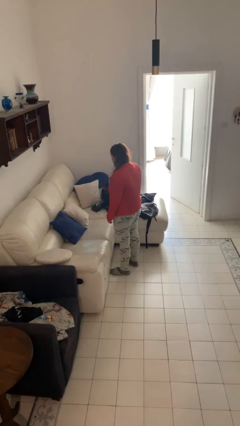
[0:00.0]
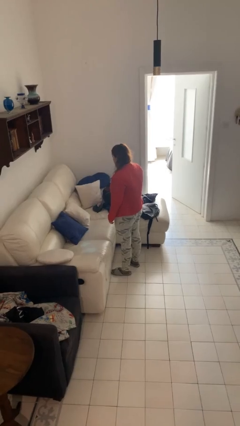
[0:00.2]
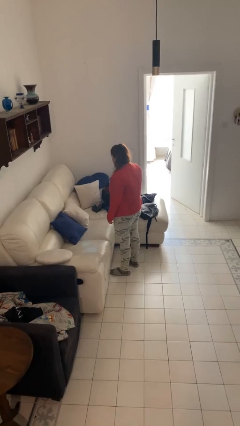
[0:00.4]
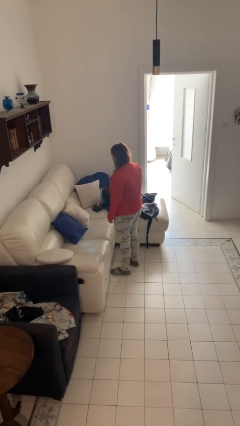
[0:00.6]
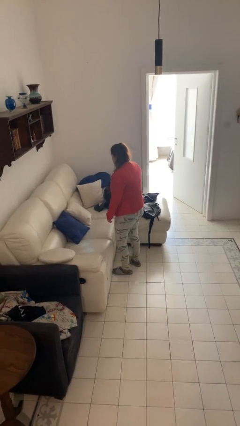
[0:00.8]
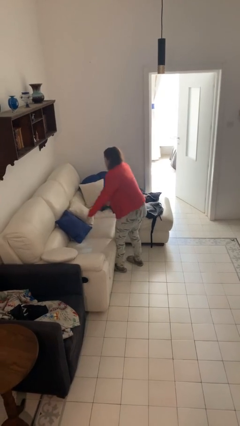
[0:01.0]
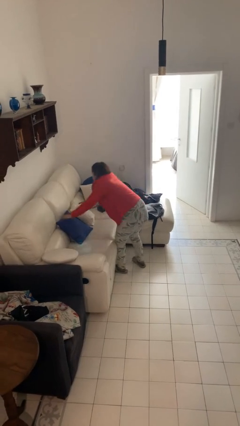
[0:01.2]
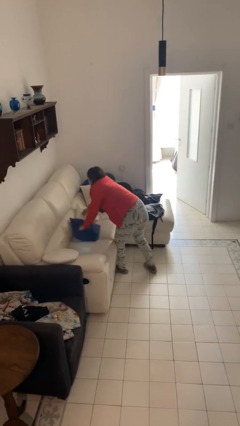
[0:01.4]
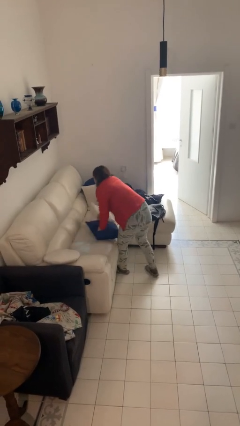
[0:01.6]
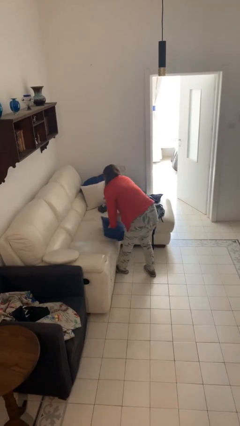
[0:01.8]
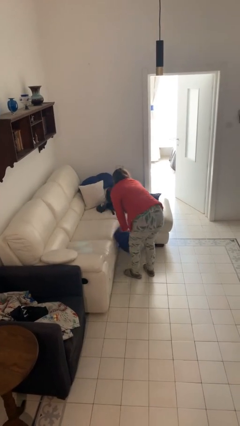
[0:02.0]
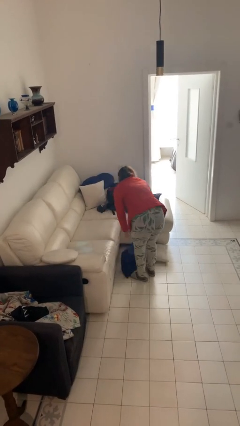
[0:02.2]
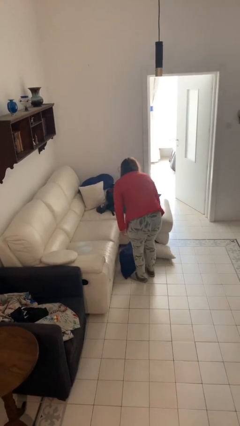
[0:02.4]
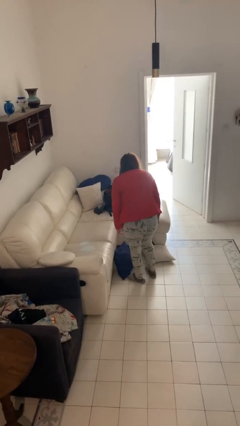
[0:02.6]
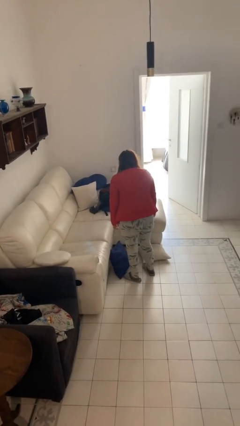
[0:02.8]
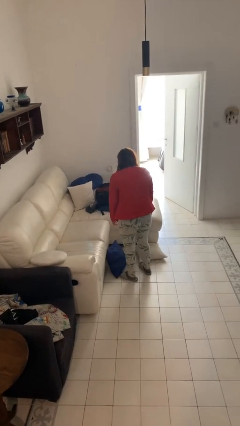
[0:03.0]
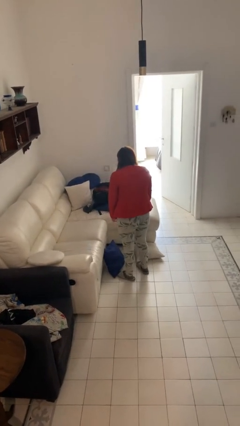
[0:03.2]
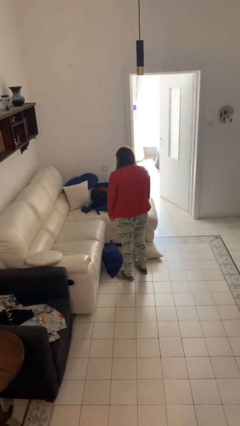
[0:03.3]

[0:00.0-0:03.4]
person knocks over furniture

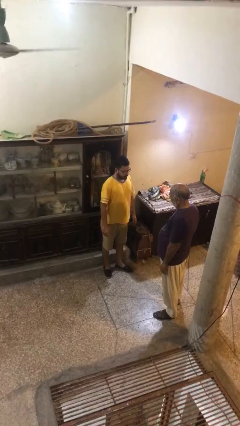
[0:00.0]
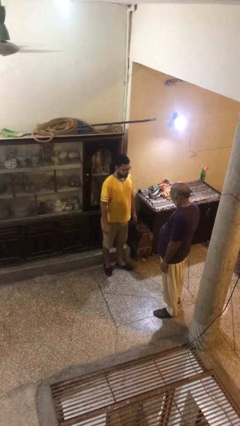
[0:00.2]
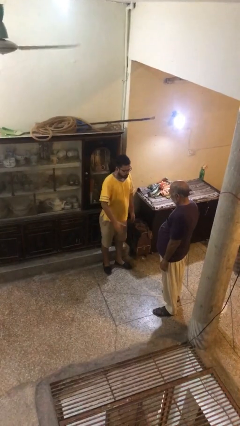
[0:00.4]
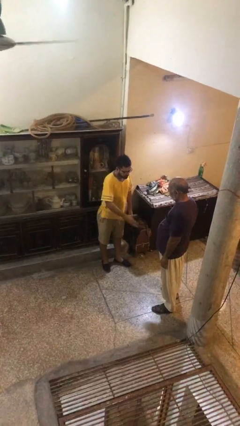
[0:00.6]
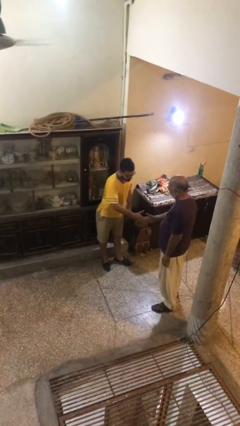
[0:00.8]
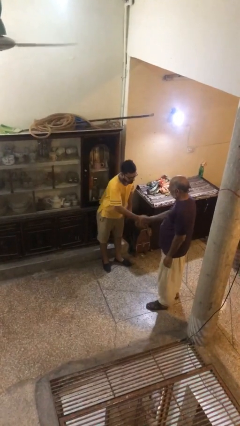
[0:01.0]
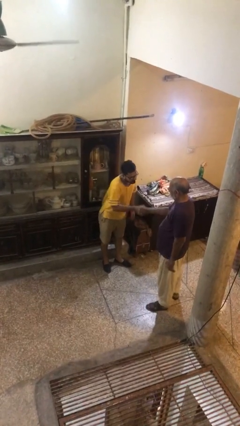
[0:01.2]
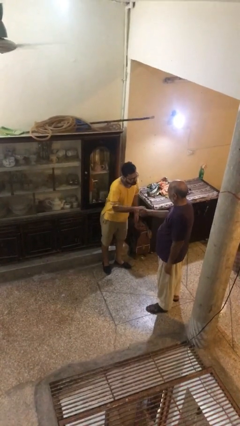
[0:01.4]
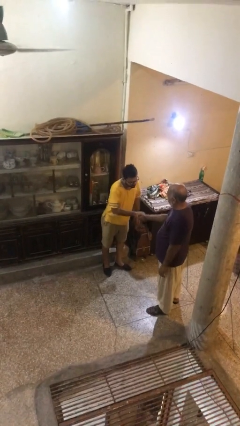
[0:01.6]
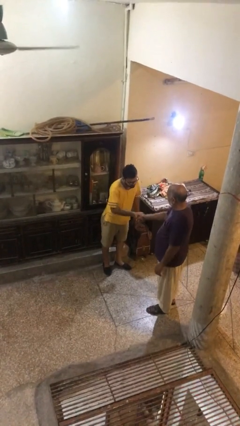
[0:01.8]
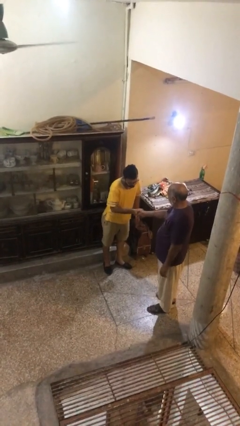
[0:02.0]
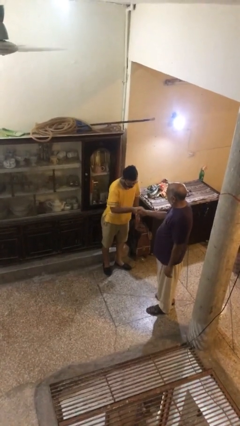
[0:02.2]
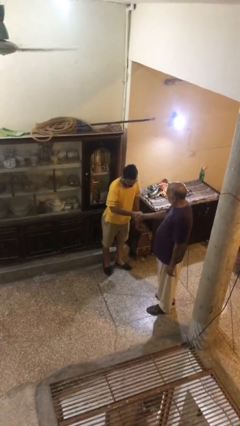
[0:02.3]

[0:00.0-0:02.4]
person shakes hand

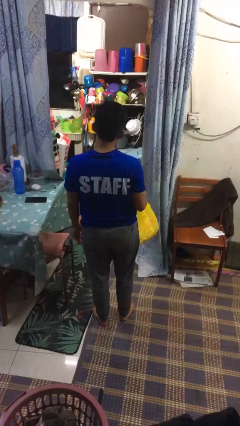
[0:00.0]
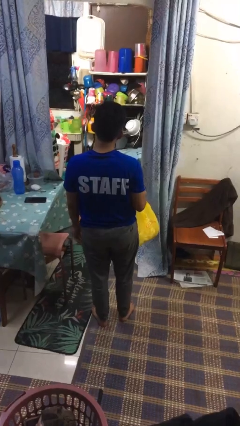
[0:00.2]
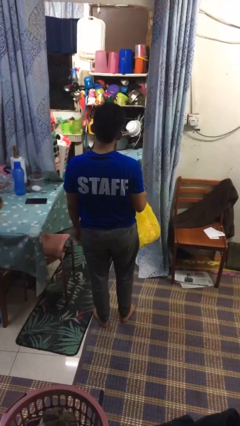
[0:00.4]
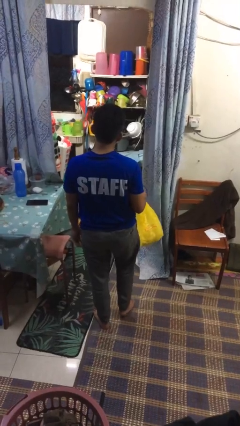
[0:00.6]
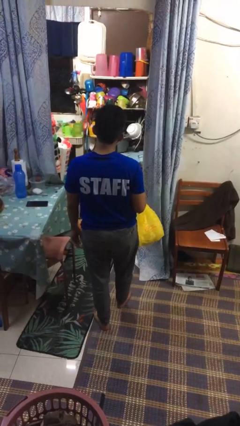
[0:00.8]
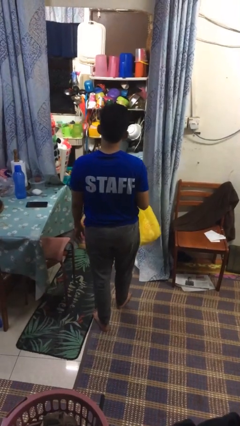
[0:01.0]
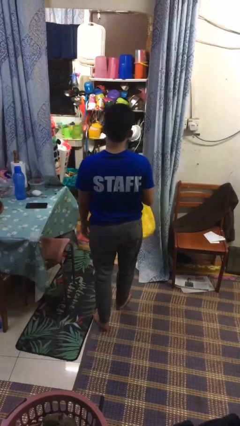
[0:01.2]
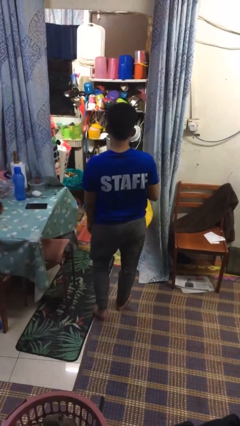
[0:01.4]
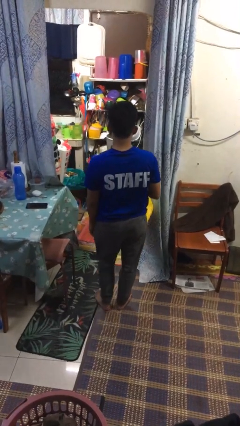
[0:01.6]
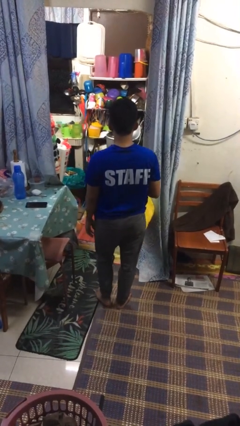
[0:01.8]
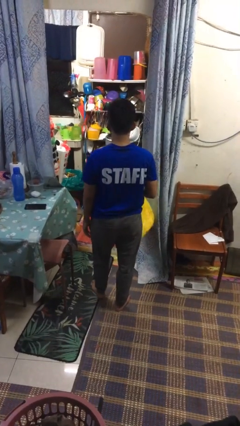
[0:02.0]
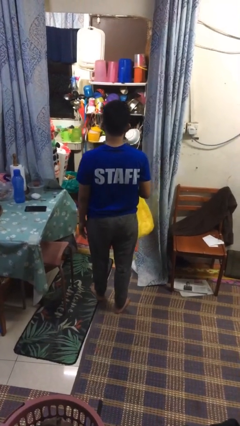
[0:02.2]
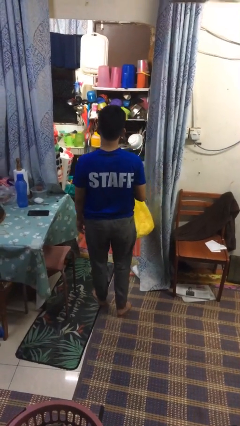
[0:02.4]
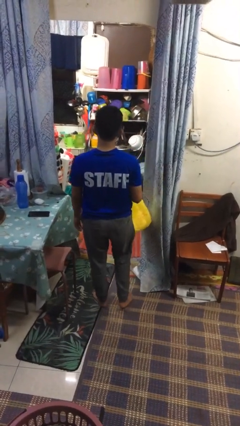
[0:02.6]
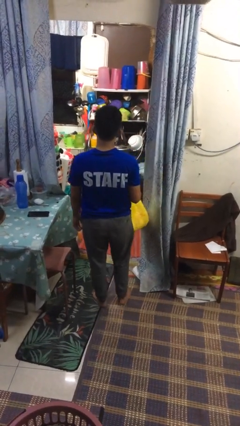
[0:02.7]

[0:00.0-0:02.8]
person carries groceries

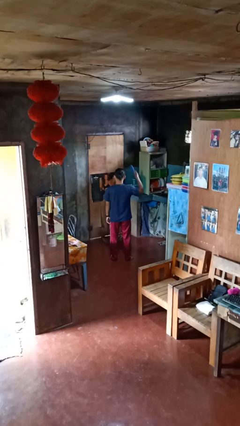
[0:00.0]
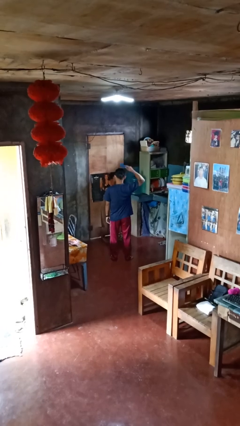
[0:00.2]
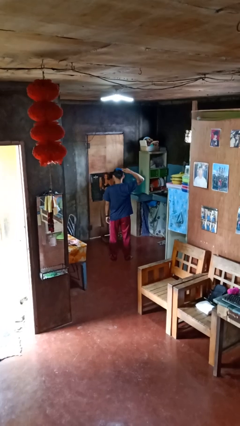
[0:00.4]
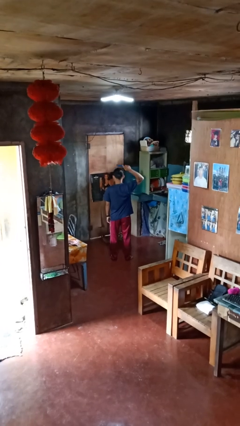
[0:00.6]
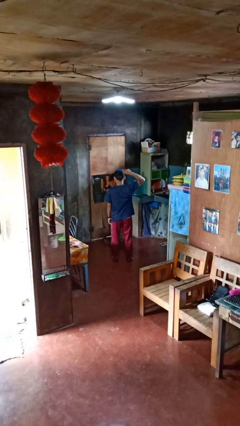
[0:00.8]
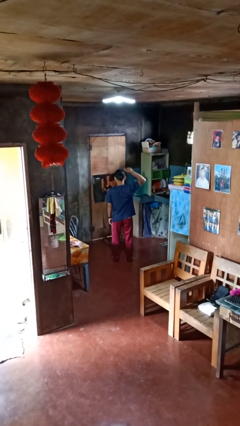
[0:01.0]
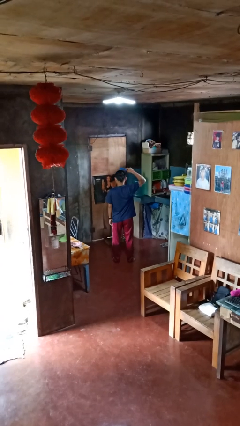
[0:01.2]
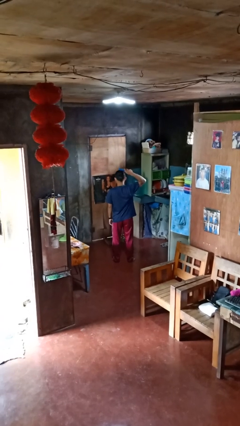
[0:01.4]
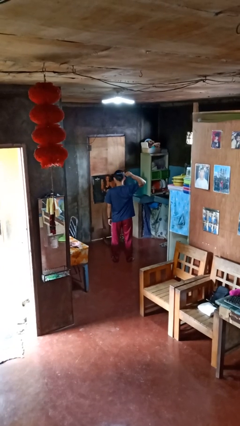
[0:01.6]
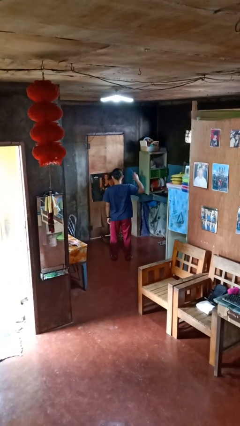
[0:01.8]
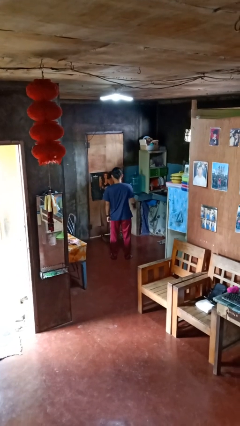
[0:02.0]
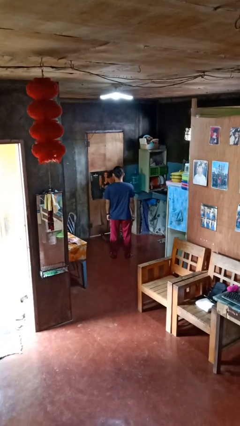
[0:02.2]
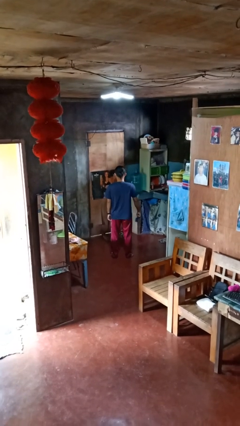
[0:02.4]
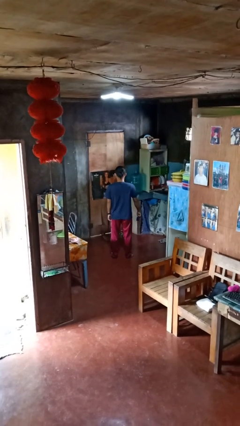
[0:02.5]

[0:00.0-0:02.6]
person brushes hair

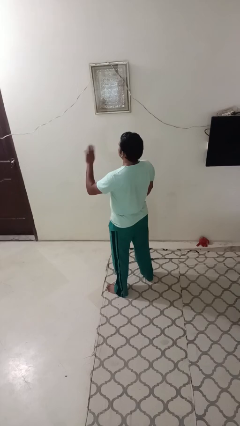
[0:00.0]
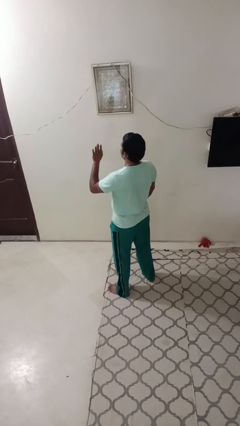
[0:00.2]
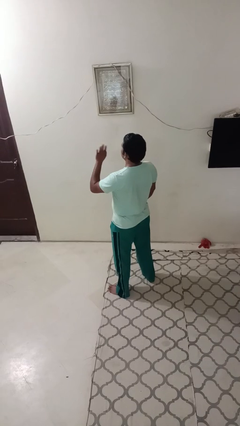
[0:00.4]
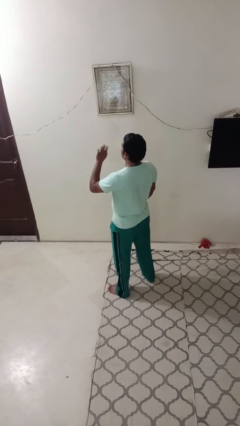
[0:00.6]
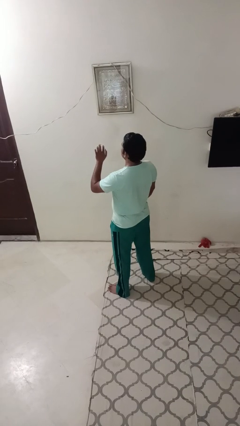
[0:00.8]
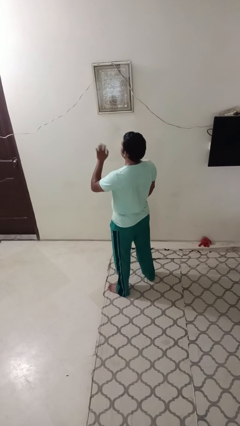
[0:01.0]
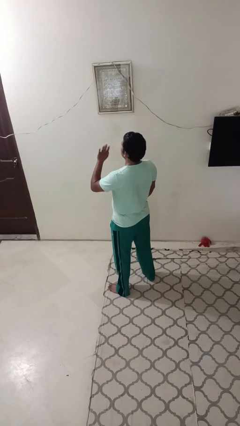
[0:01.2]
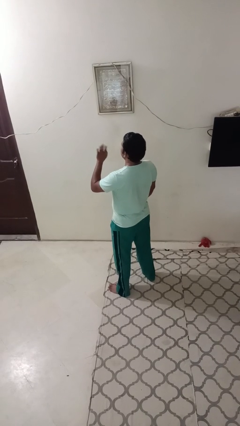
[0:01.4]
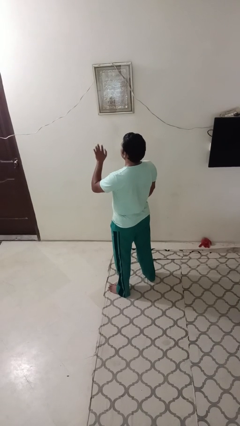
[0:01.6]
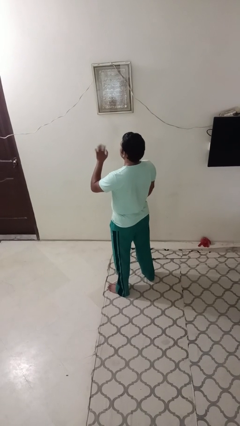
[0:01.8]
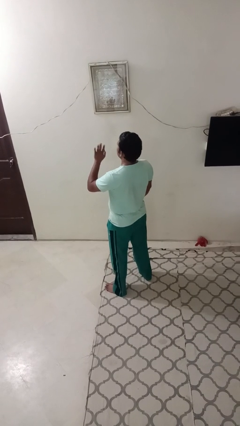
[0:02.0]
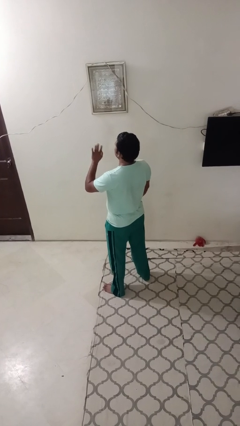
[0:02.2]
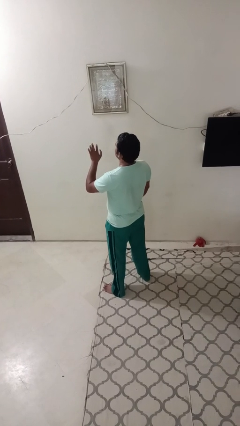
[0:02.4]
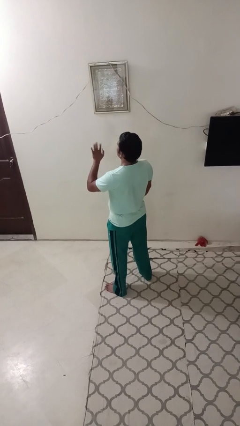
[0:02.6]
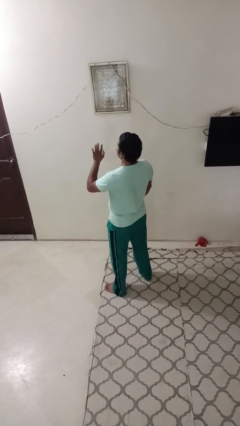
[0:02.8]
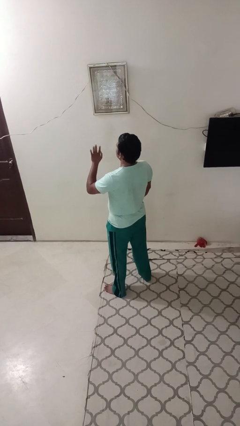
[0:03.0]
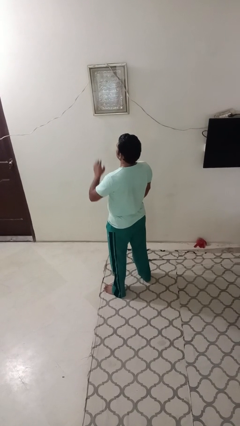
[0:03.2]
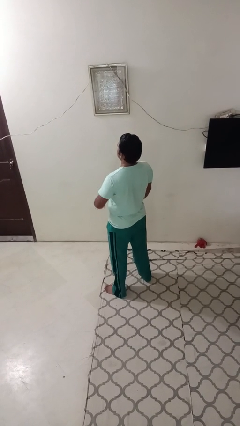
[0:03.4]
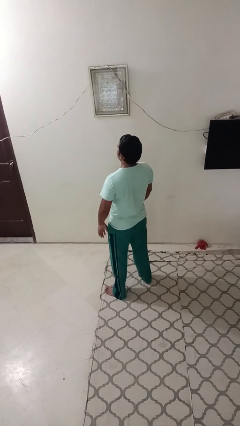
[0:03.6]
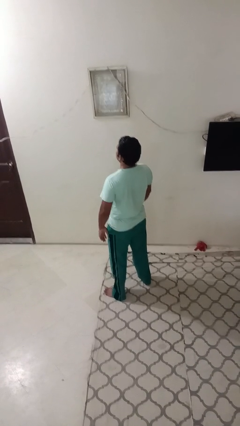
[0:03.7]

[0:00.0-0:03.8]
person waves at person

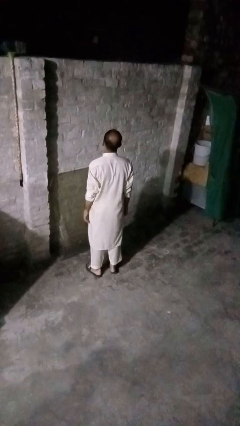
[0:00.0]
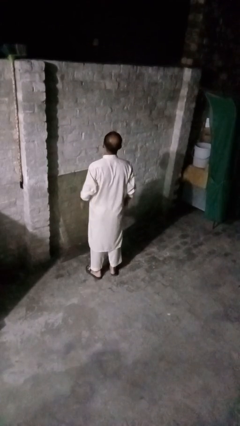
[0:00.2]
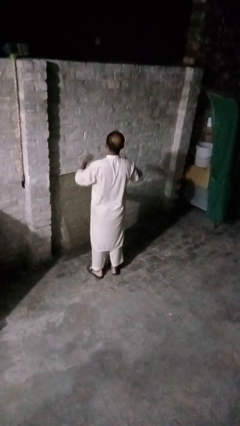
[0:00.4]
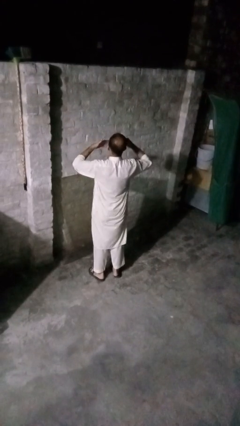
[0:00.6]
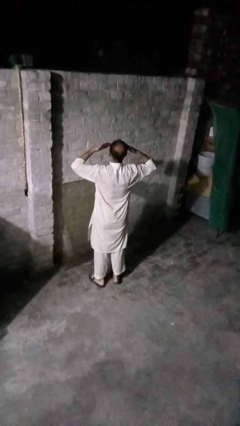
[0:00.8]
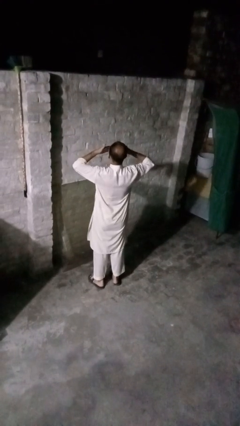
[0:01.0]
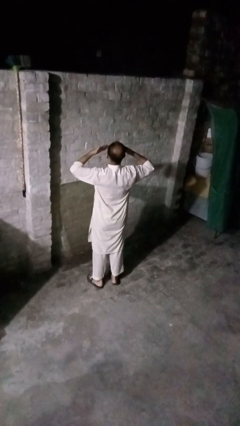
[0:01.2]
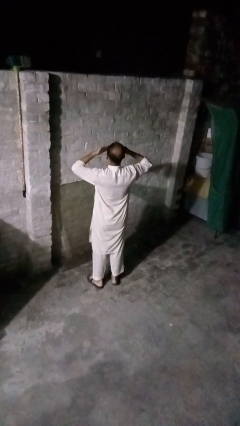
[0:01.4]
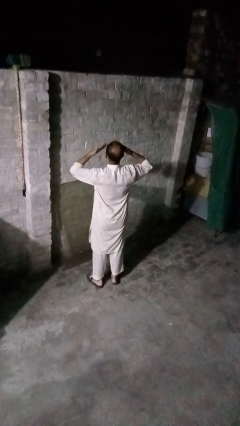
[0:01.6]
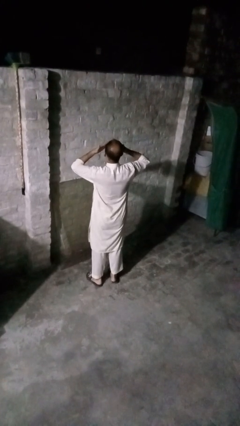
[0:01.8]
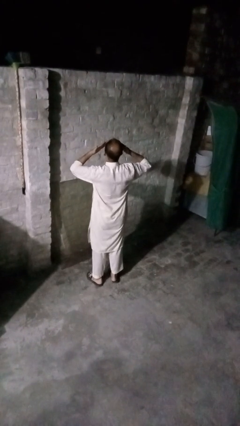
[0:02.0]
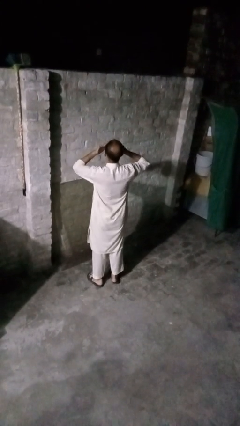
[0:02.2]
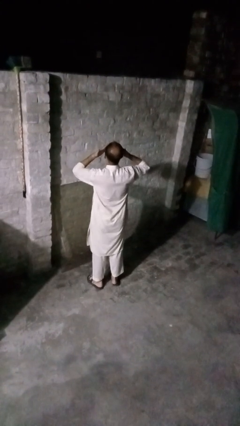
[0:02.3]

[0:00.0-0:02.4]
person rubs eyes

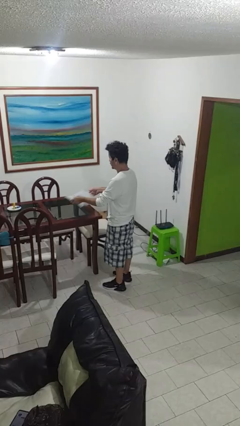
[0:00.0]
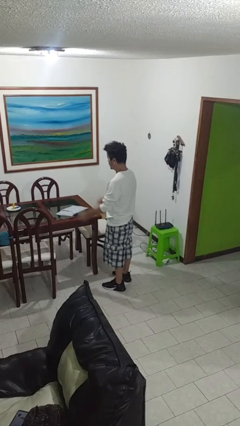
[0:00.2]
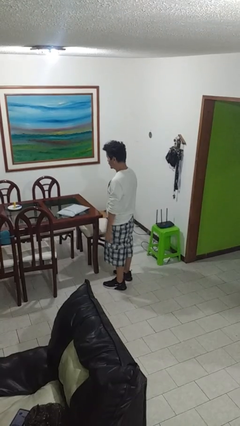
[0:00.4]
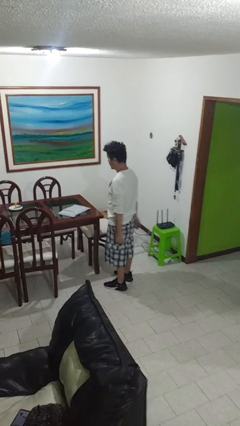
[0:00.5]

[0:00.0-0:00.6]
person throws object on table
